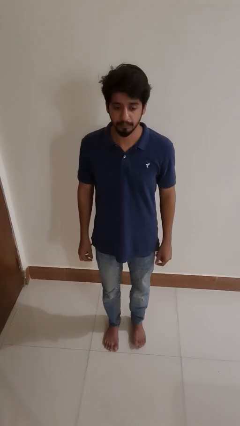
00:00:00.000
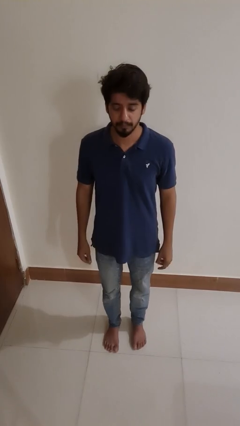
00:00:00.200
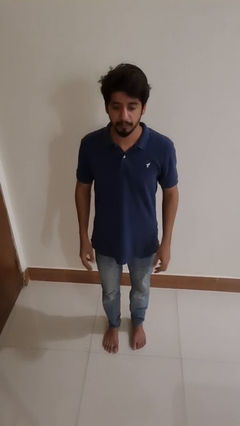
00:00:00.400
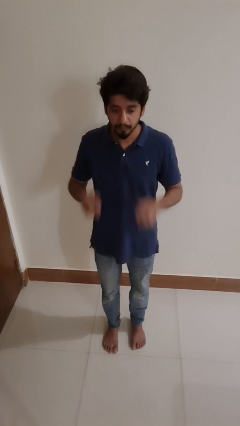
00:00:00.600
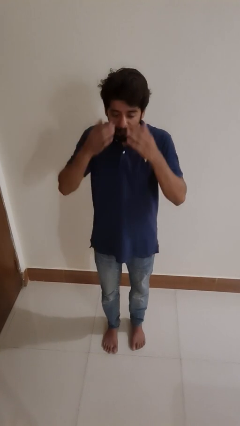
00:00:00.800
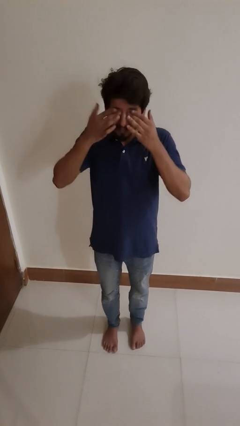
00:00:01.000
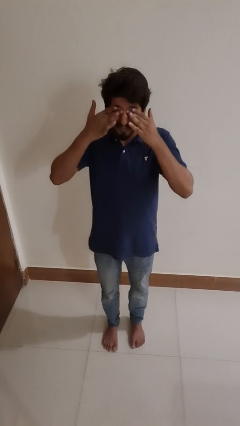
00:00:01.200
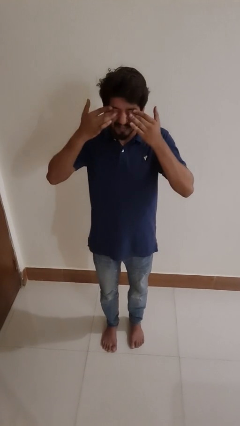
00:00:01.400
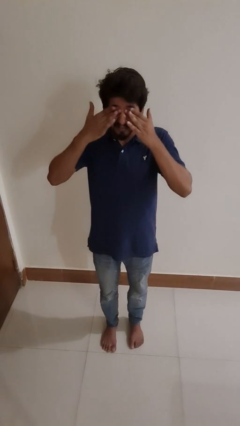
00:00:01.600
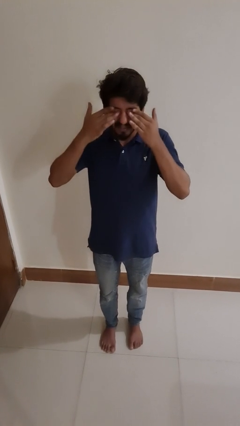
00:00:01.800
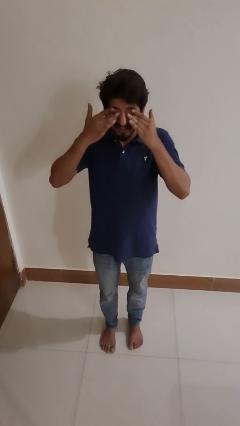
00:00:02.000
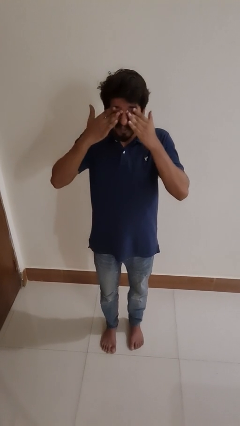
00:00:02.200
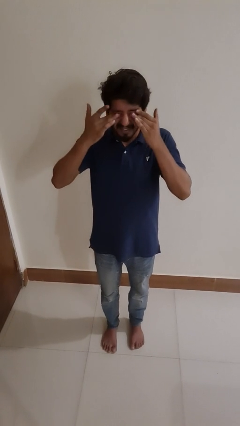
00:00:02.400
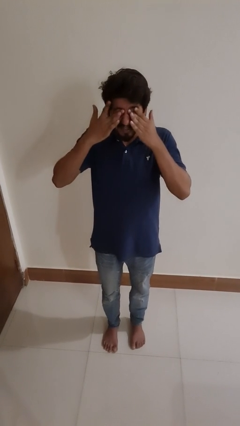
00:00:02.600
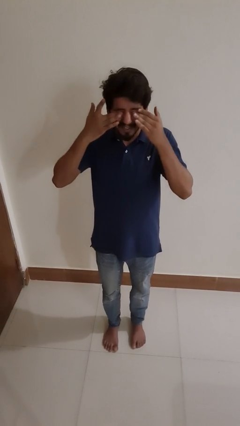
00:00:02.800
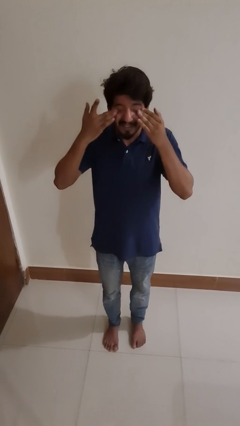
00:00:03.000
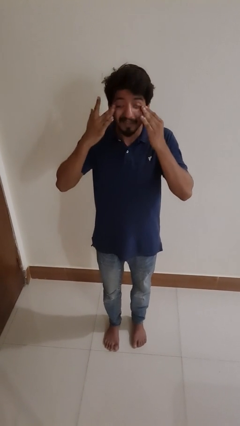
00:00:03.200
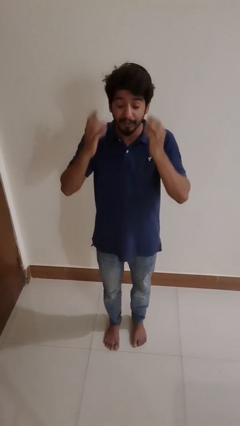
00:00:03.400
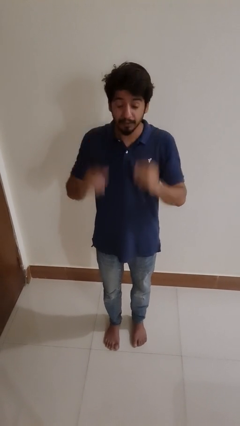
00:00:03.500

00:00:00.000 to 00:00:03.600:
person rubs eyes

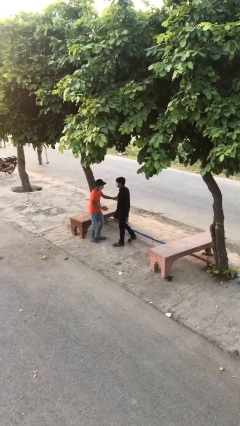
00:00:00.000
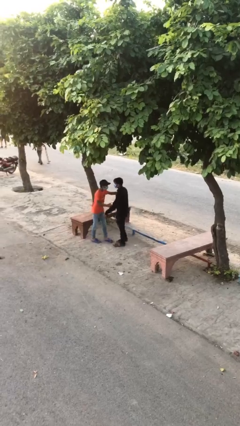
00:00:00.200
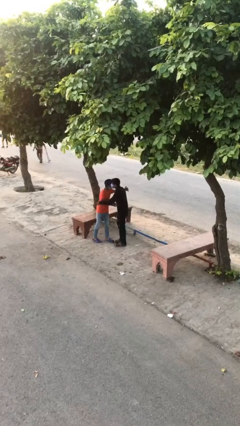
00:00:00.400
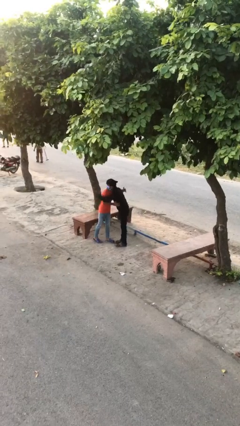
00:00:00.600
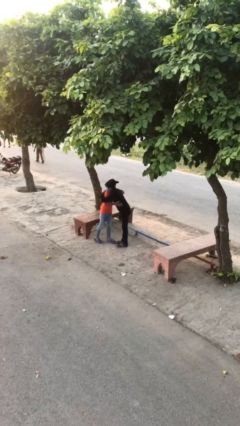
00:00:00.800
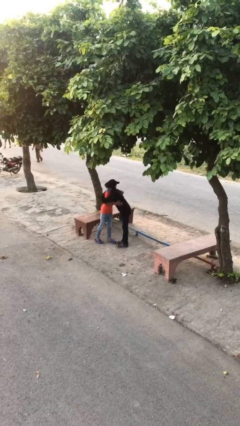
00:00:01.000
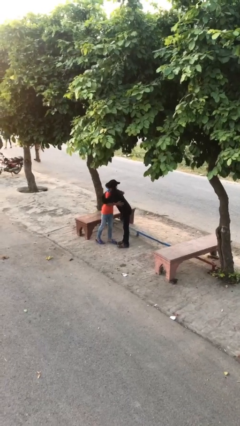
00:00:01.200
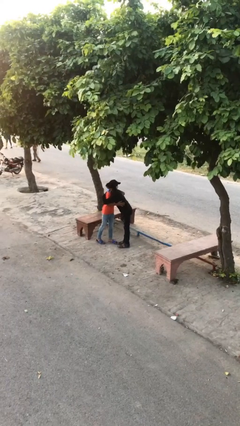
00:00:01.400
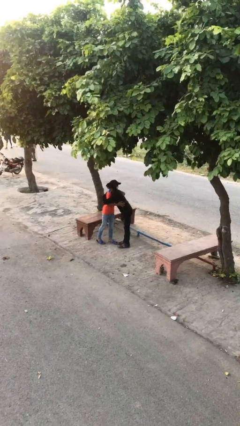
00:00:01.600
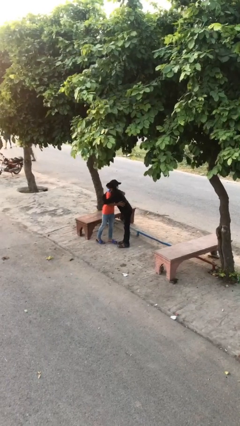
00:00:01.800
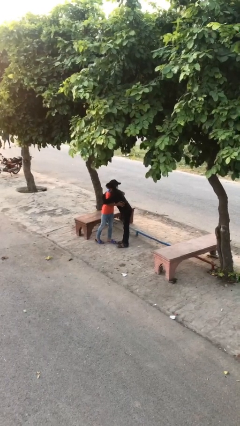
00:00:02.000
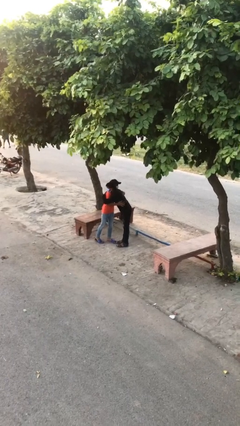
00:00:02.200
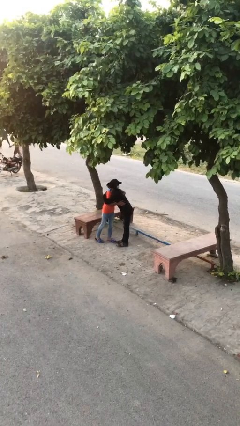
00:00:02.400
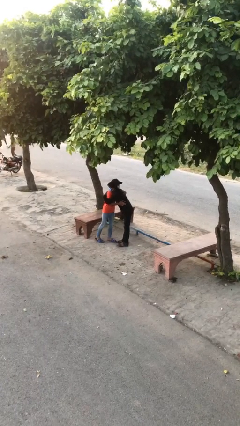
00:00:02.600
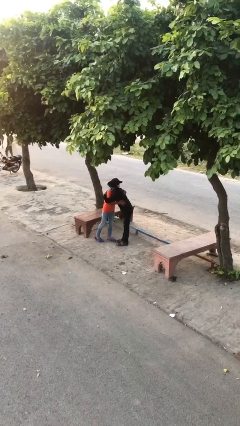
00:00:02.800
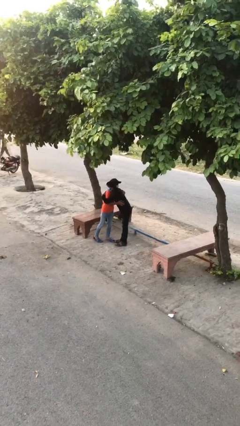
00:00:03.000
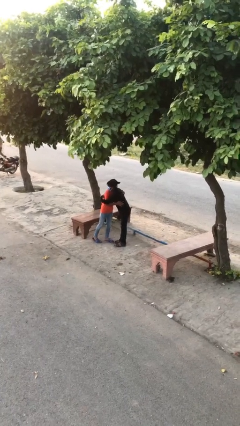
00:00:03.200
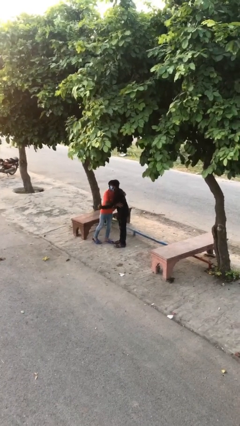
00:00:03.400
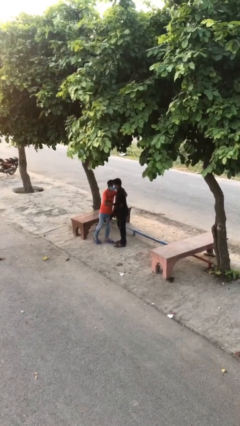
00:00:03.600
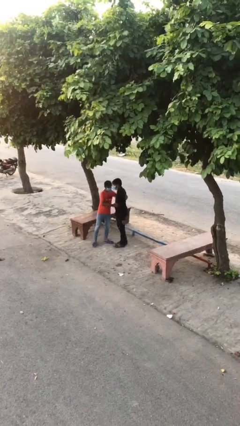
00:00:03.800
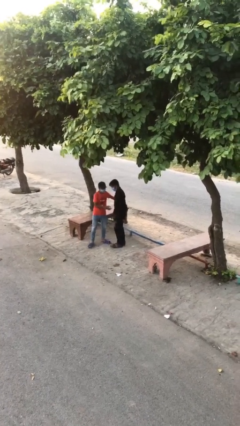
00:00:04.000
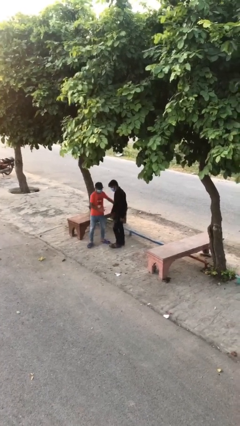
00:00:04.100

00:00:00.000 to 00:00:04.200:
person embraces person

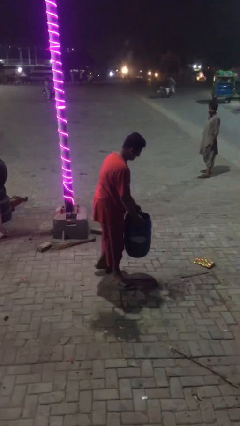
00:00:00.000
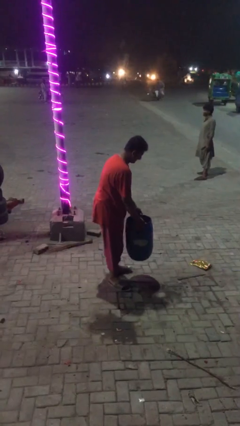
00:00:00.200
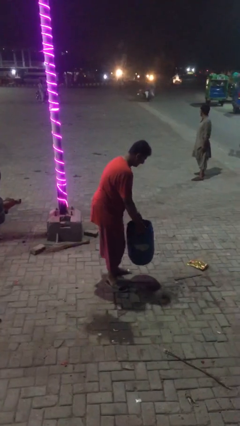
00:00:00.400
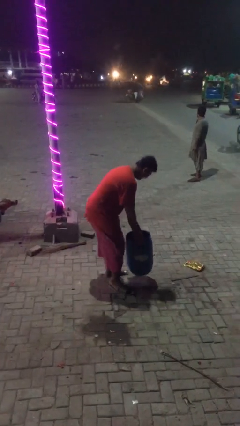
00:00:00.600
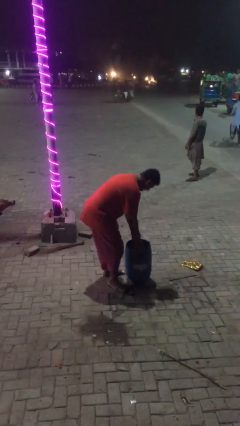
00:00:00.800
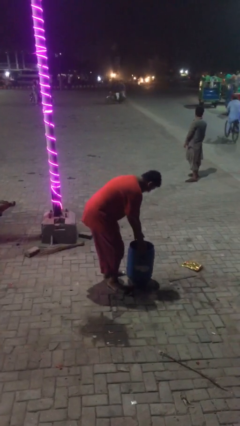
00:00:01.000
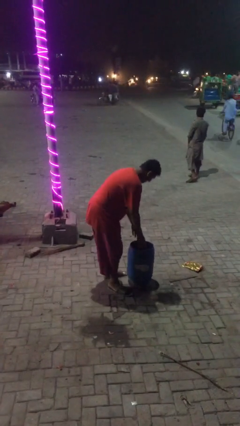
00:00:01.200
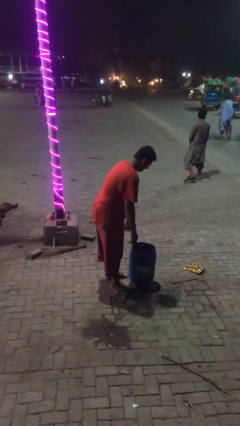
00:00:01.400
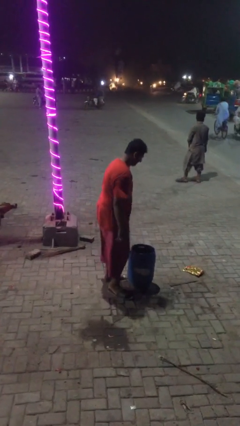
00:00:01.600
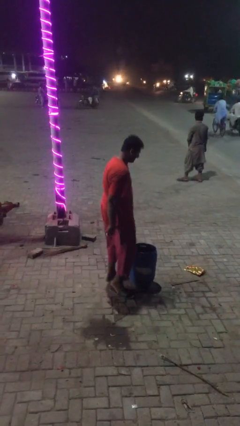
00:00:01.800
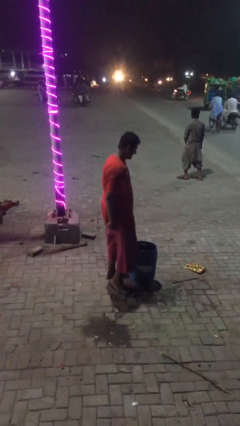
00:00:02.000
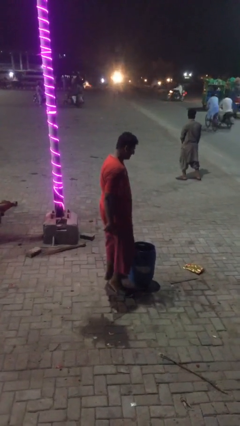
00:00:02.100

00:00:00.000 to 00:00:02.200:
person puts down object on floor

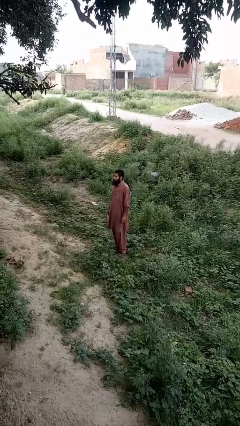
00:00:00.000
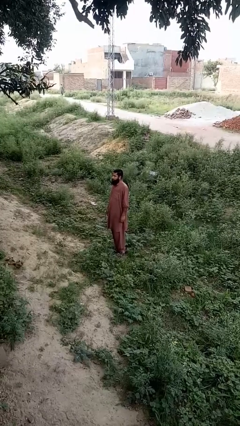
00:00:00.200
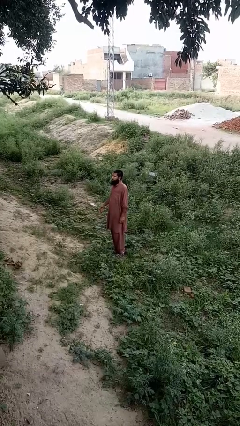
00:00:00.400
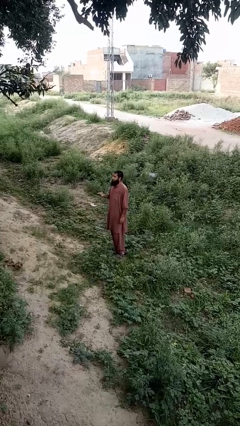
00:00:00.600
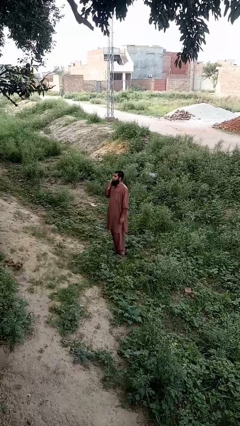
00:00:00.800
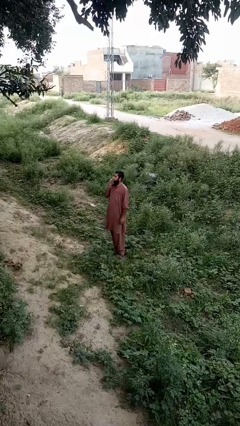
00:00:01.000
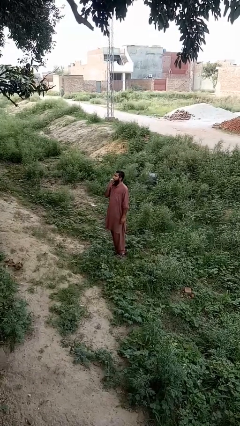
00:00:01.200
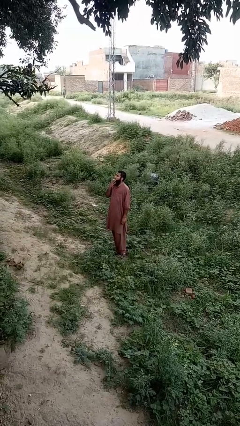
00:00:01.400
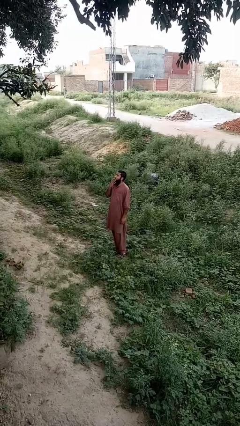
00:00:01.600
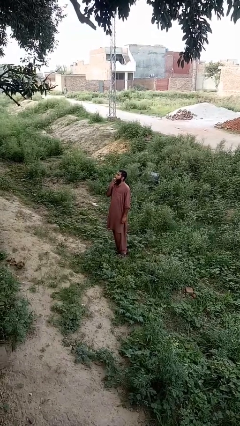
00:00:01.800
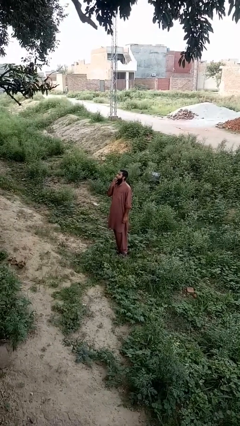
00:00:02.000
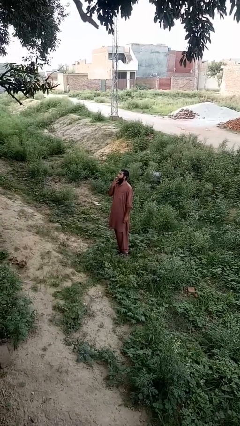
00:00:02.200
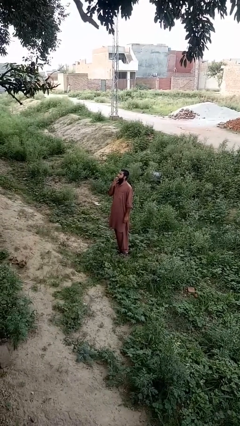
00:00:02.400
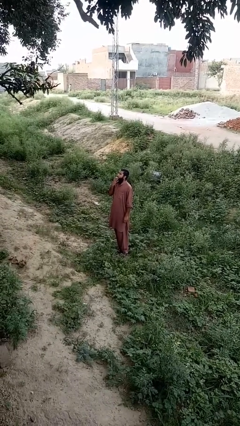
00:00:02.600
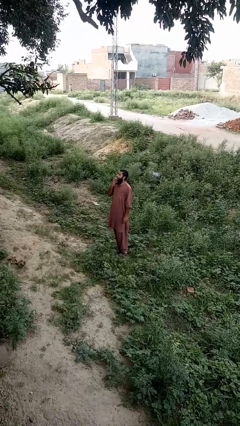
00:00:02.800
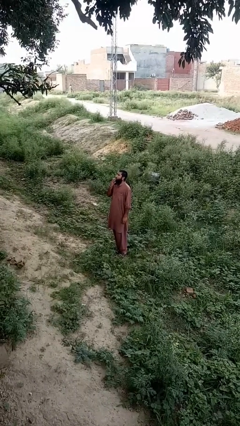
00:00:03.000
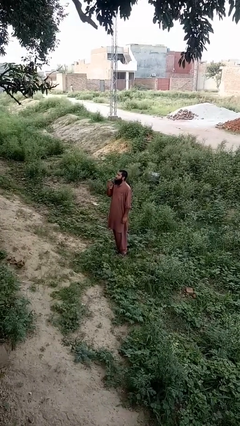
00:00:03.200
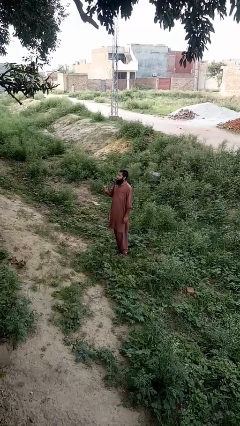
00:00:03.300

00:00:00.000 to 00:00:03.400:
person vapes

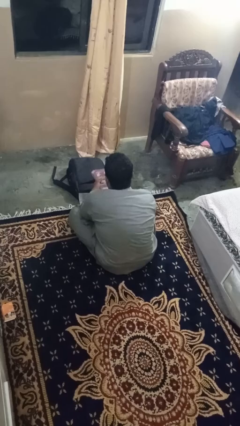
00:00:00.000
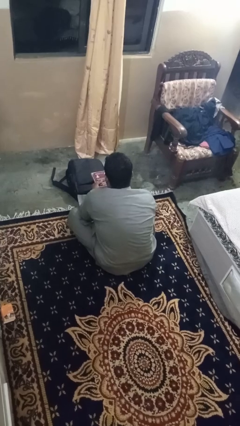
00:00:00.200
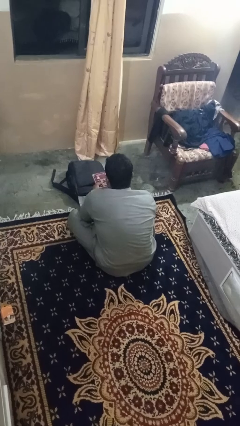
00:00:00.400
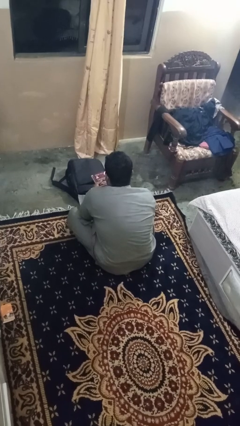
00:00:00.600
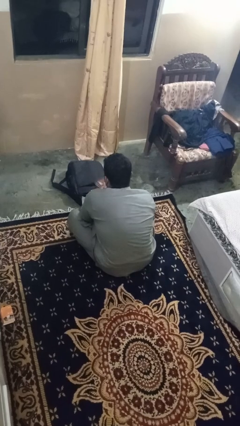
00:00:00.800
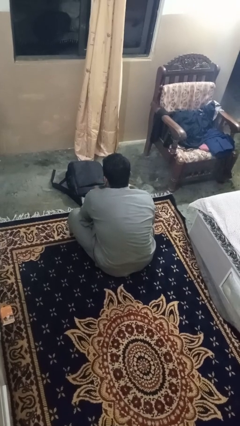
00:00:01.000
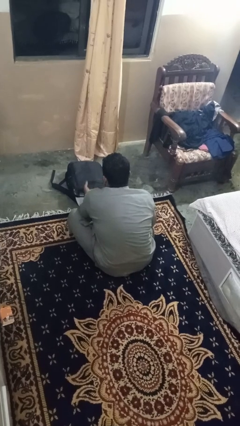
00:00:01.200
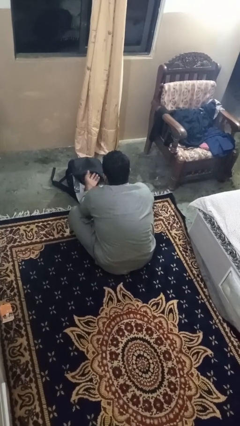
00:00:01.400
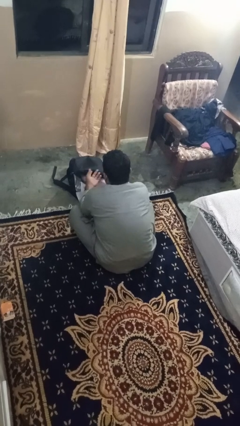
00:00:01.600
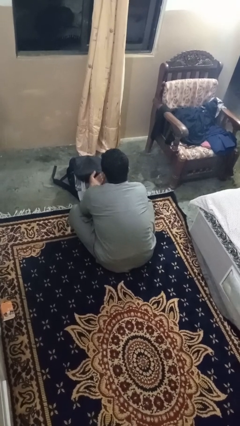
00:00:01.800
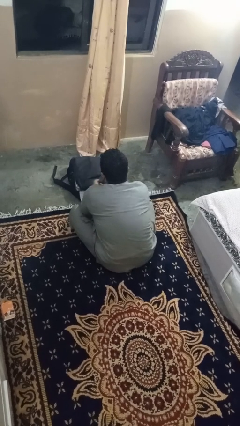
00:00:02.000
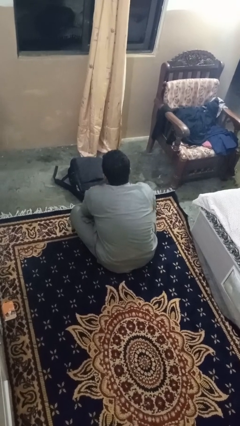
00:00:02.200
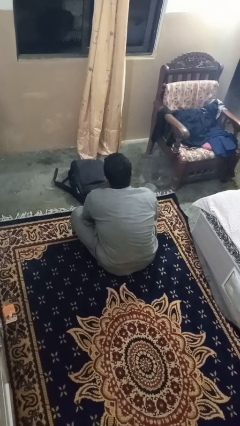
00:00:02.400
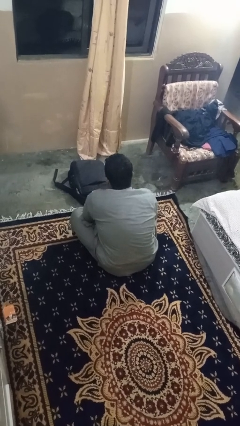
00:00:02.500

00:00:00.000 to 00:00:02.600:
person puts object into bag

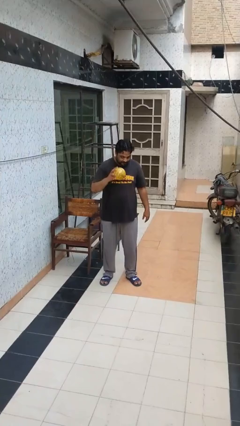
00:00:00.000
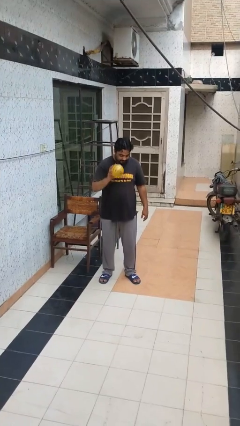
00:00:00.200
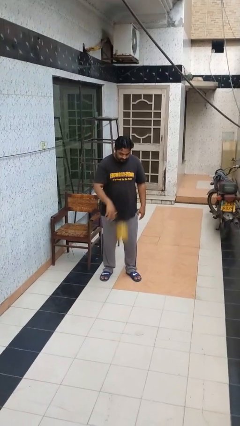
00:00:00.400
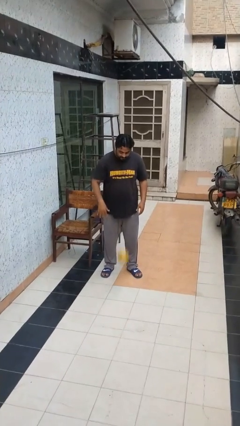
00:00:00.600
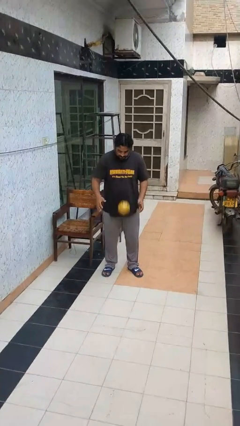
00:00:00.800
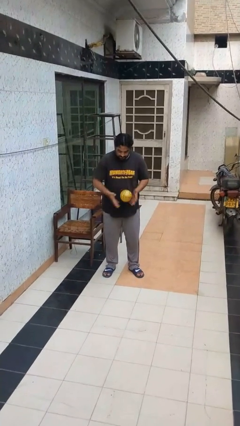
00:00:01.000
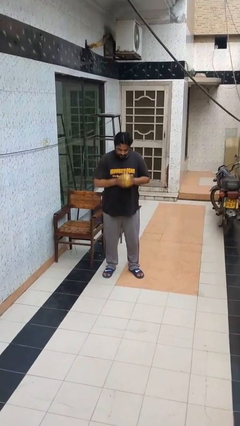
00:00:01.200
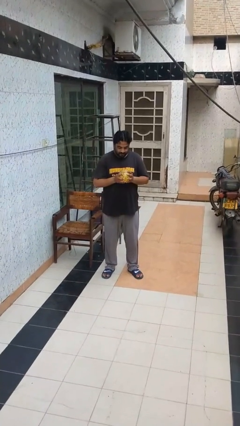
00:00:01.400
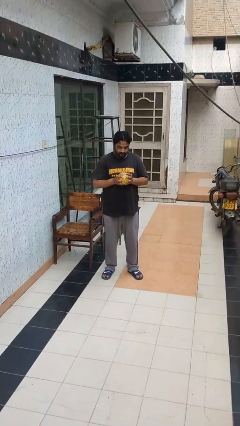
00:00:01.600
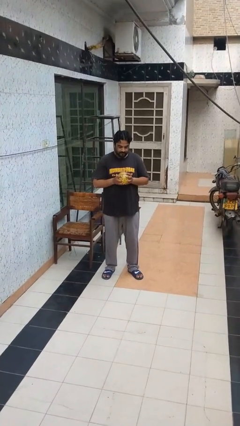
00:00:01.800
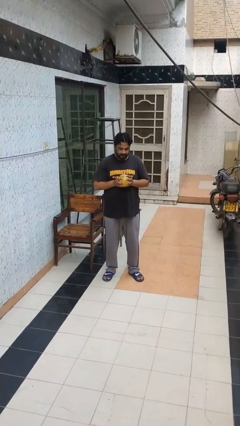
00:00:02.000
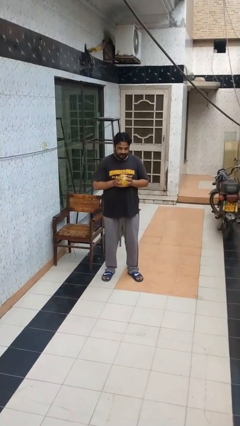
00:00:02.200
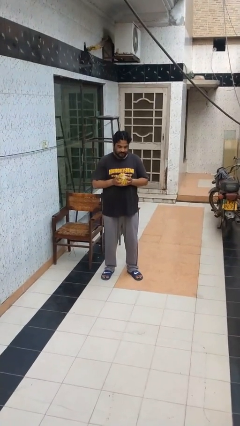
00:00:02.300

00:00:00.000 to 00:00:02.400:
person bounces ball on floor
